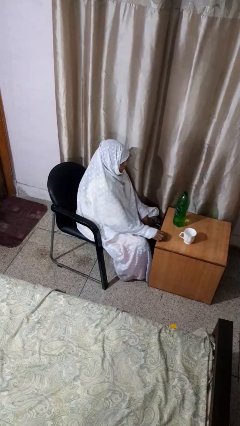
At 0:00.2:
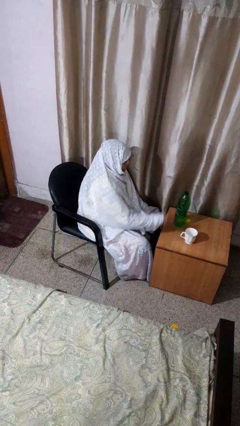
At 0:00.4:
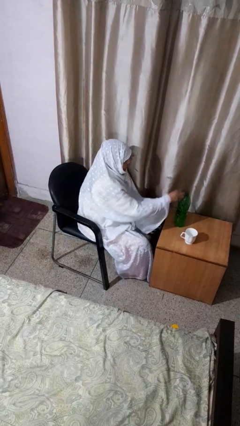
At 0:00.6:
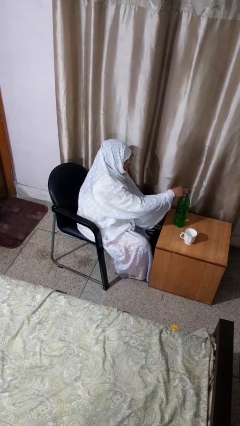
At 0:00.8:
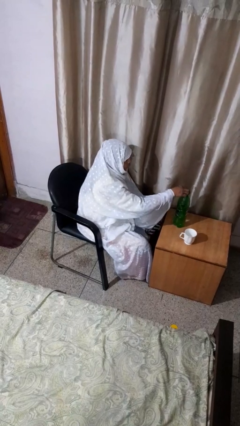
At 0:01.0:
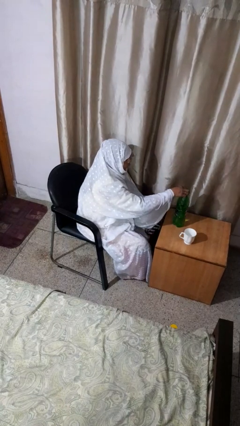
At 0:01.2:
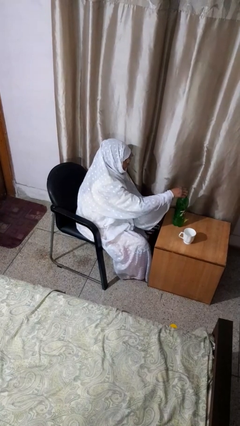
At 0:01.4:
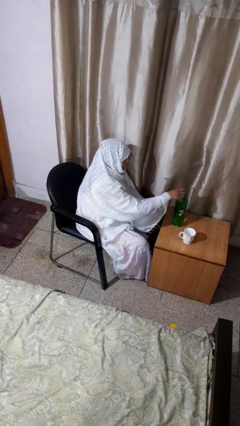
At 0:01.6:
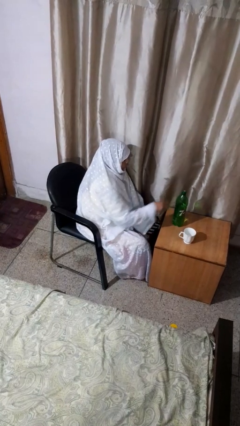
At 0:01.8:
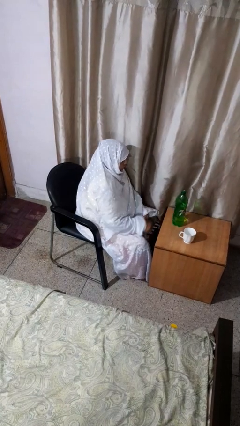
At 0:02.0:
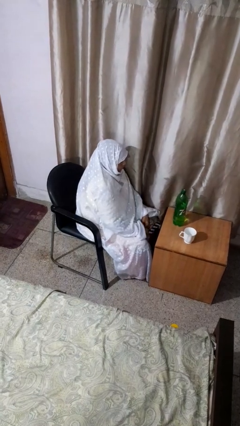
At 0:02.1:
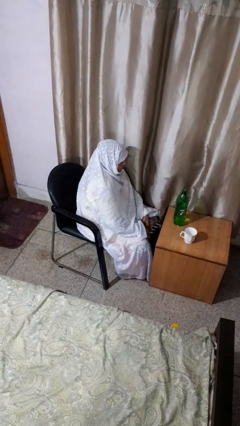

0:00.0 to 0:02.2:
person screws lid to bottle

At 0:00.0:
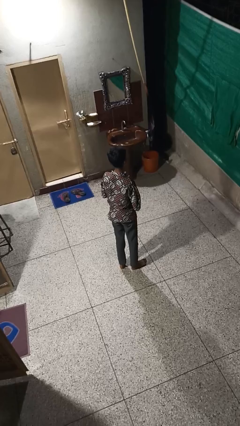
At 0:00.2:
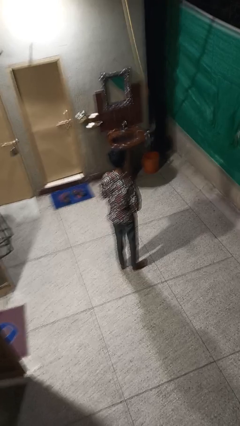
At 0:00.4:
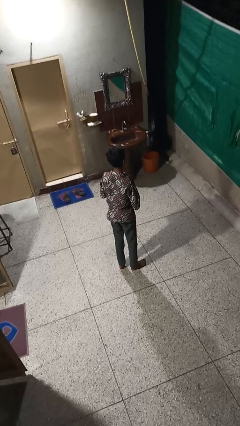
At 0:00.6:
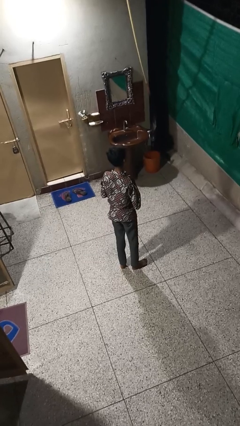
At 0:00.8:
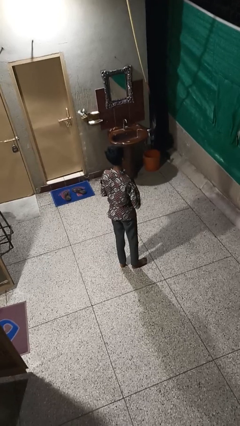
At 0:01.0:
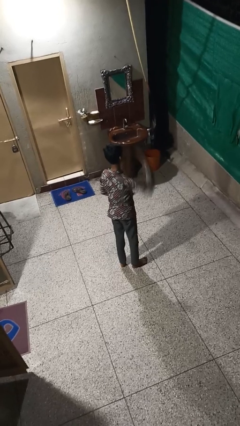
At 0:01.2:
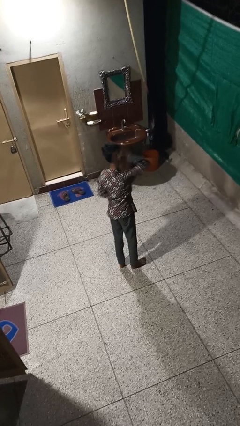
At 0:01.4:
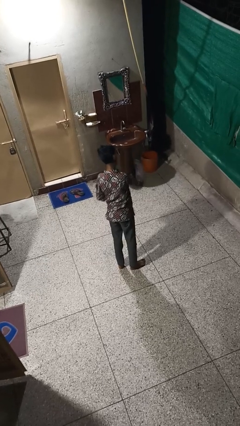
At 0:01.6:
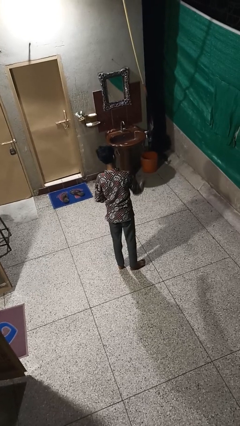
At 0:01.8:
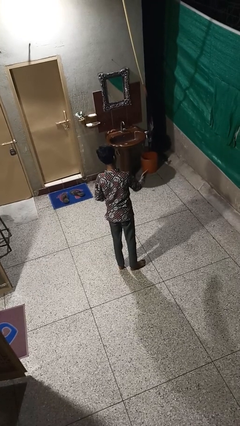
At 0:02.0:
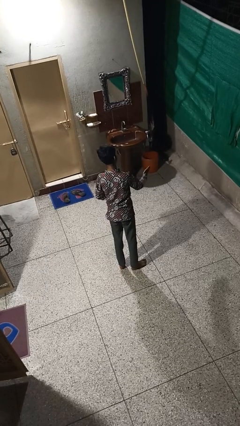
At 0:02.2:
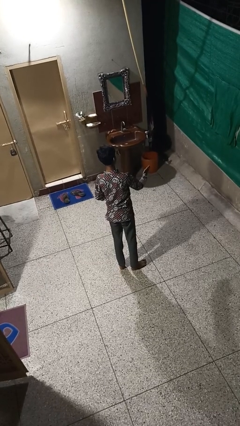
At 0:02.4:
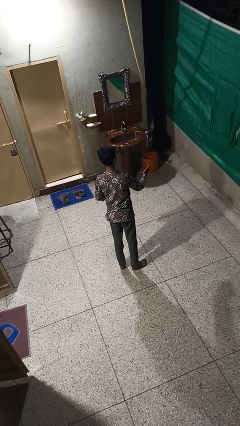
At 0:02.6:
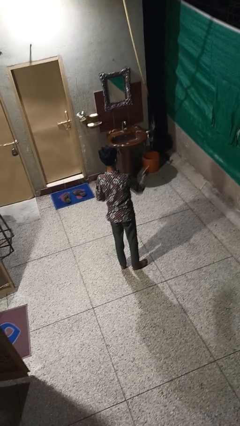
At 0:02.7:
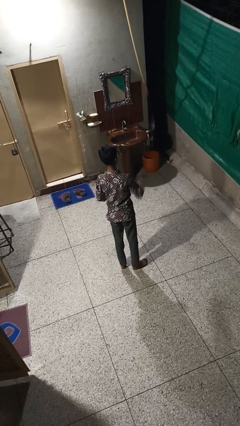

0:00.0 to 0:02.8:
person karate chop

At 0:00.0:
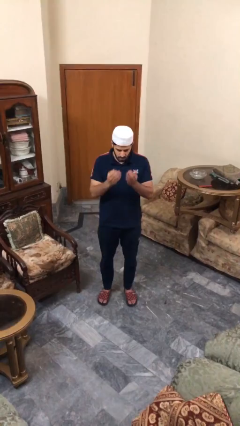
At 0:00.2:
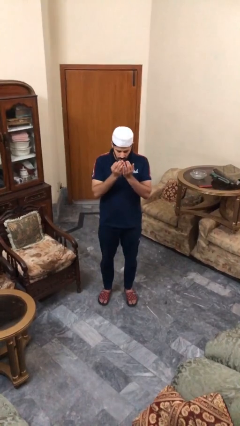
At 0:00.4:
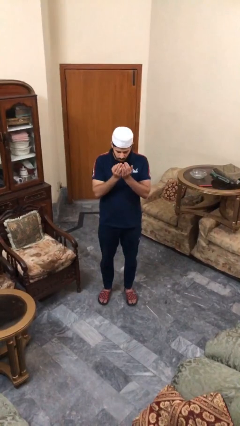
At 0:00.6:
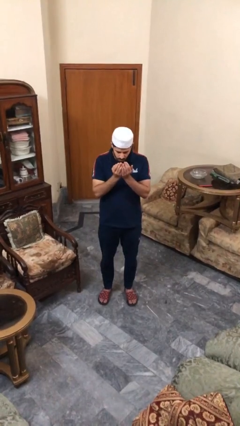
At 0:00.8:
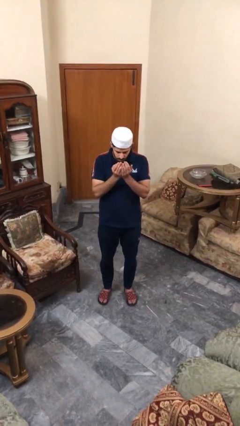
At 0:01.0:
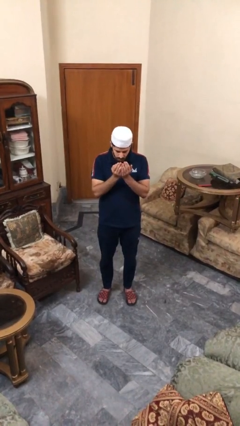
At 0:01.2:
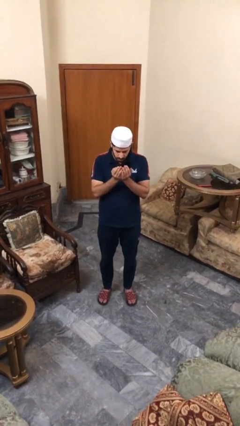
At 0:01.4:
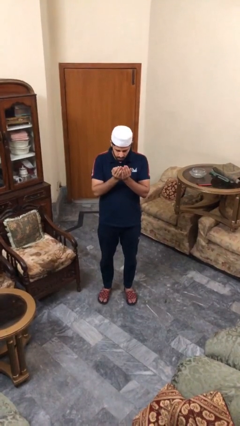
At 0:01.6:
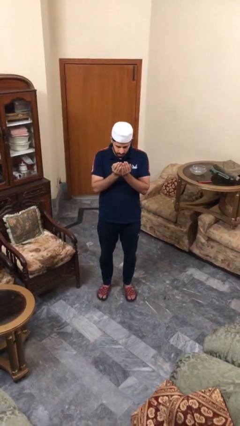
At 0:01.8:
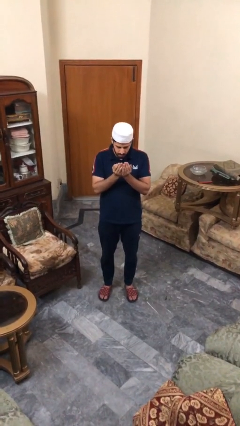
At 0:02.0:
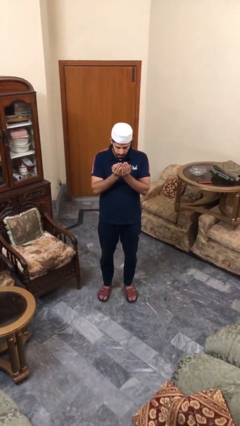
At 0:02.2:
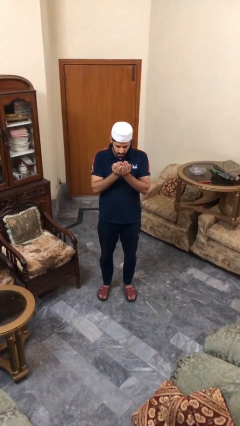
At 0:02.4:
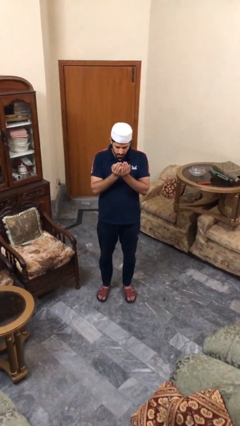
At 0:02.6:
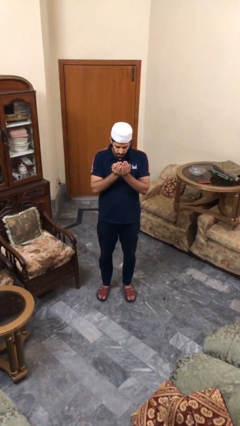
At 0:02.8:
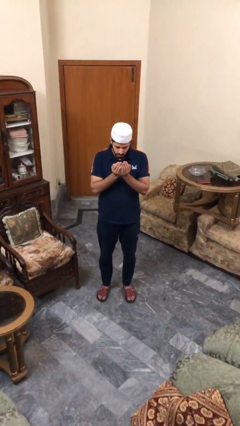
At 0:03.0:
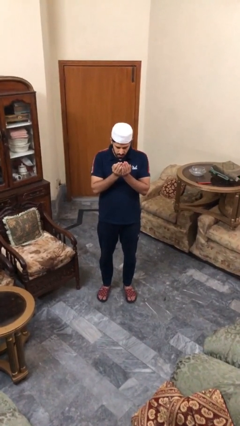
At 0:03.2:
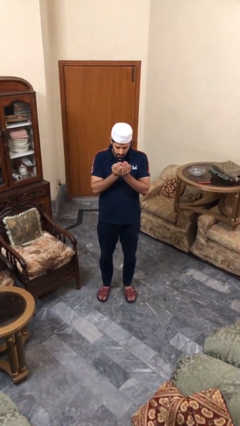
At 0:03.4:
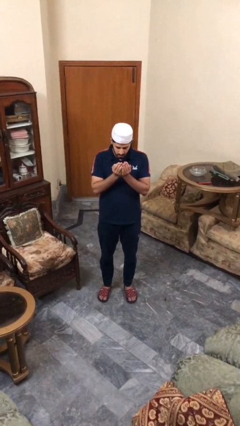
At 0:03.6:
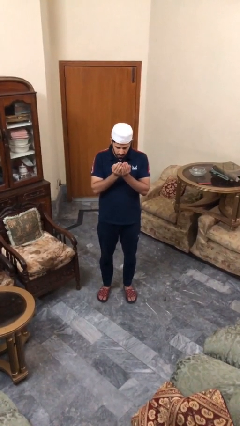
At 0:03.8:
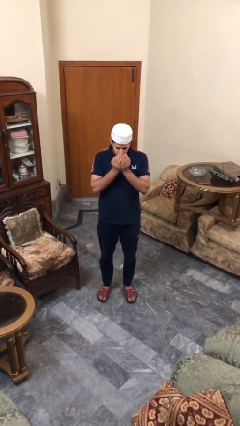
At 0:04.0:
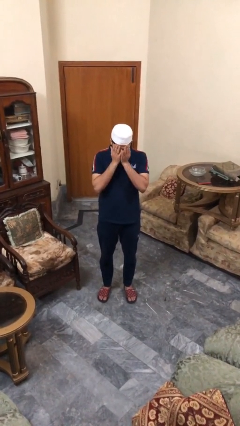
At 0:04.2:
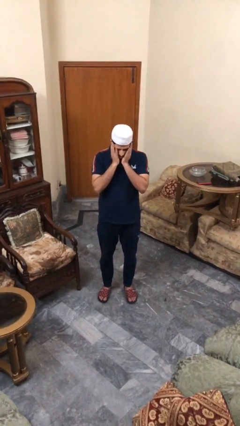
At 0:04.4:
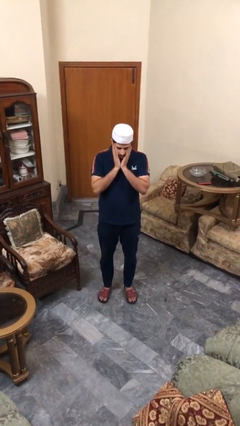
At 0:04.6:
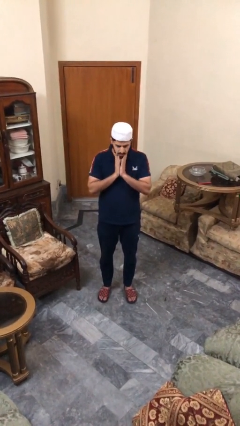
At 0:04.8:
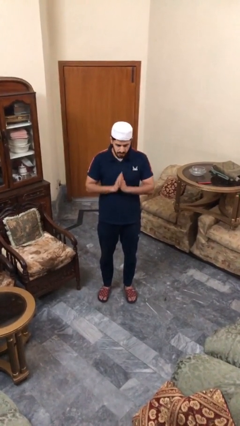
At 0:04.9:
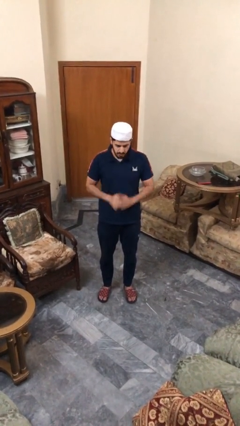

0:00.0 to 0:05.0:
person prays

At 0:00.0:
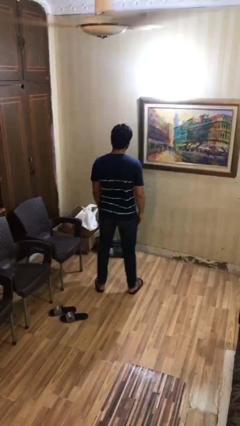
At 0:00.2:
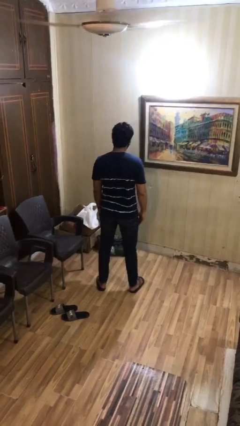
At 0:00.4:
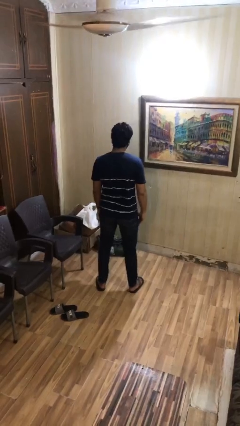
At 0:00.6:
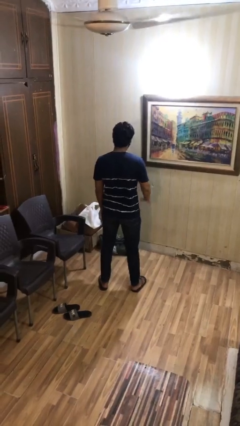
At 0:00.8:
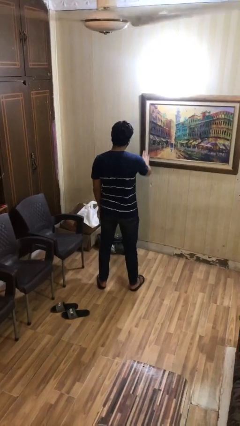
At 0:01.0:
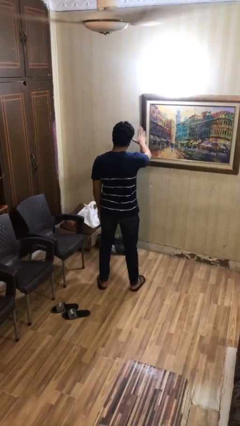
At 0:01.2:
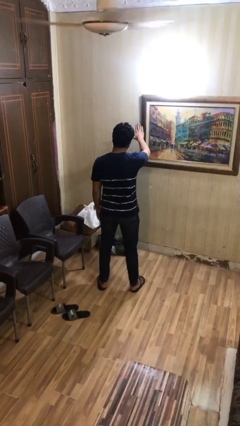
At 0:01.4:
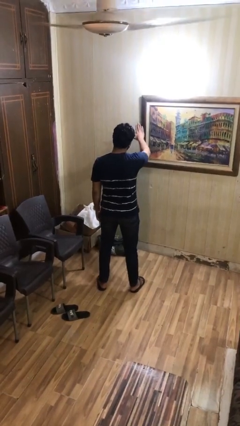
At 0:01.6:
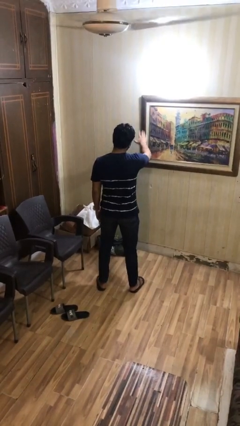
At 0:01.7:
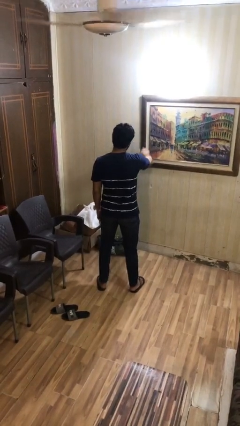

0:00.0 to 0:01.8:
person gestures stop

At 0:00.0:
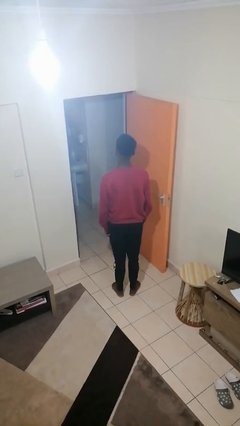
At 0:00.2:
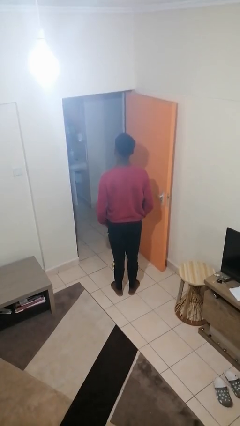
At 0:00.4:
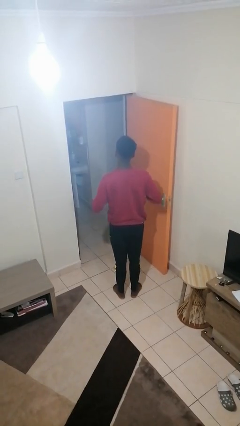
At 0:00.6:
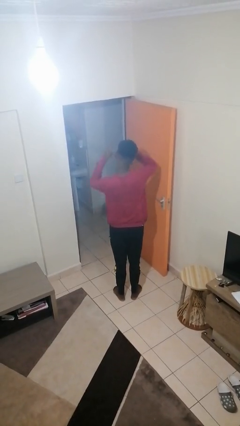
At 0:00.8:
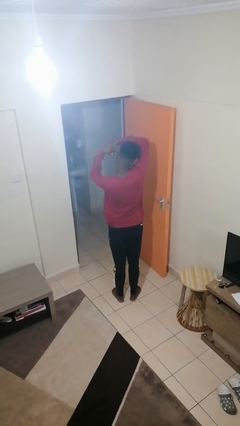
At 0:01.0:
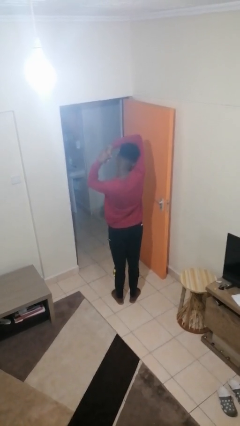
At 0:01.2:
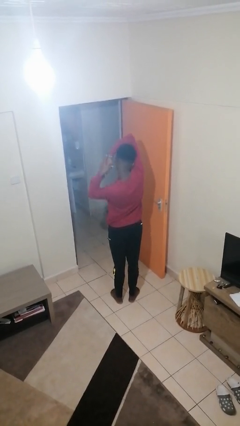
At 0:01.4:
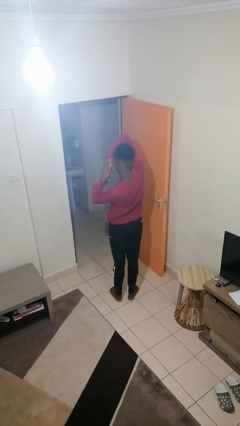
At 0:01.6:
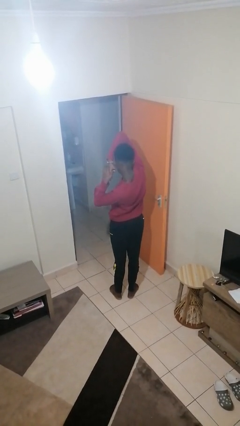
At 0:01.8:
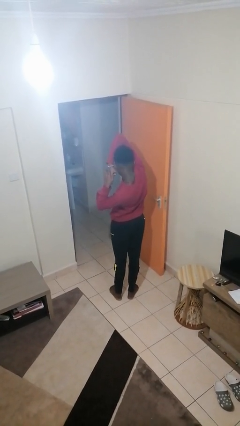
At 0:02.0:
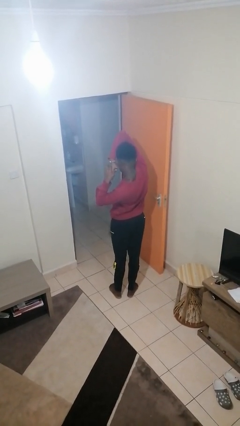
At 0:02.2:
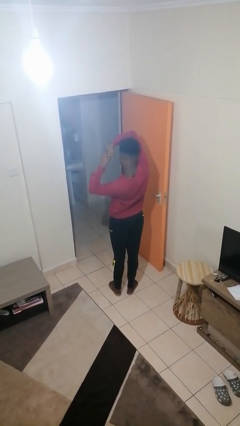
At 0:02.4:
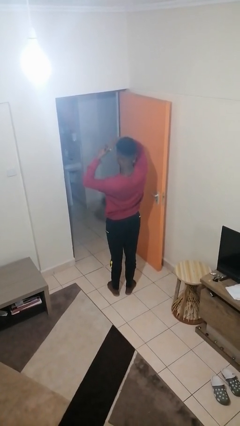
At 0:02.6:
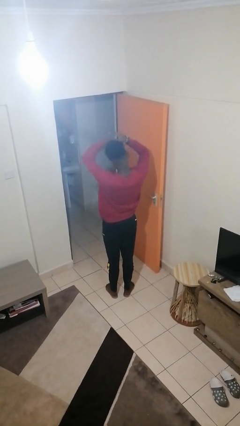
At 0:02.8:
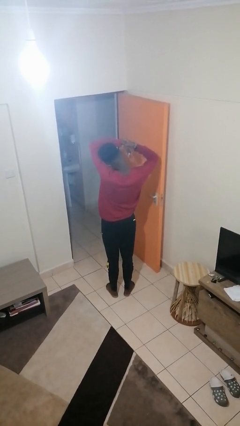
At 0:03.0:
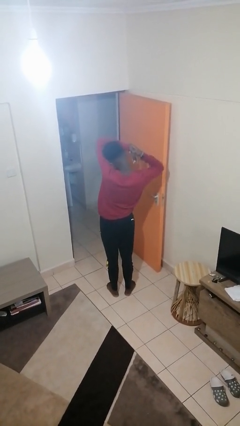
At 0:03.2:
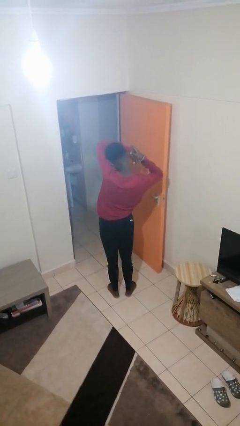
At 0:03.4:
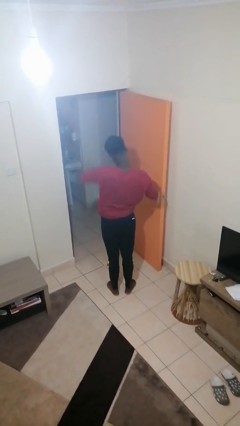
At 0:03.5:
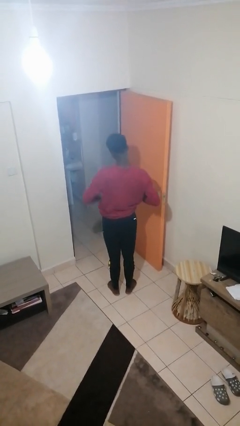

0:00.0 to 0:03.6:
person stretches arms over head

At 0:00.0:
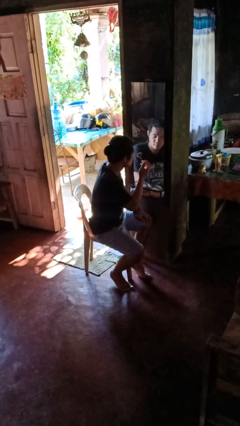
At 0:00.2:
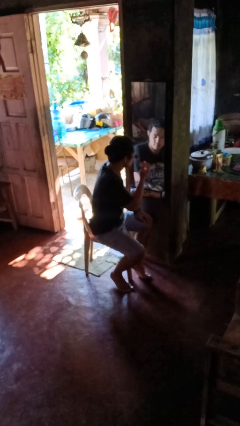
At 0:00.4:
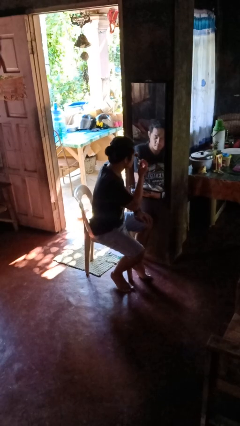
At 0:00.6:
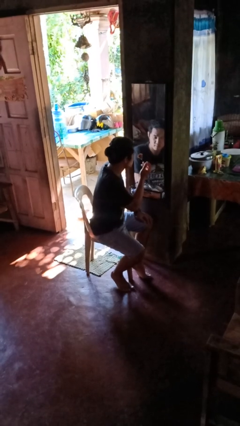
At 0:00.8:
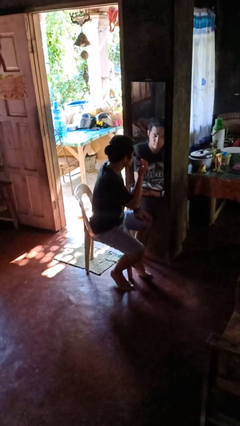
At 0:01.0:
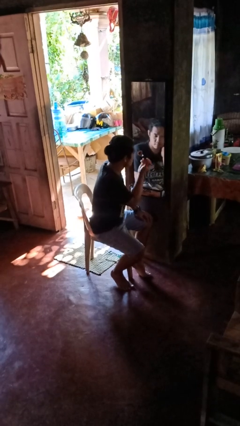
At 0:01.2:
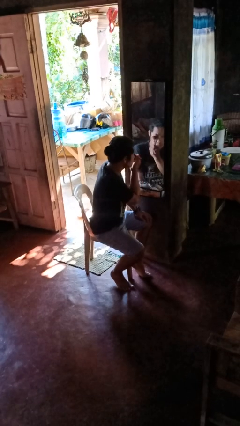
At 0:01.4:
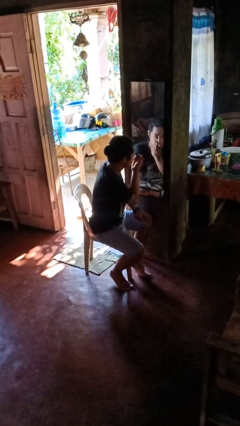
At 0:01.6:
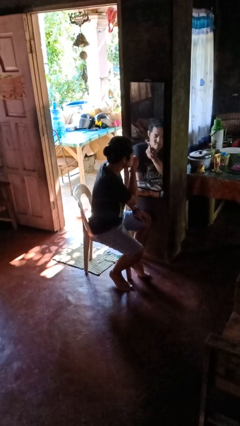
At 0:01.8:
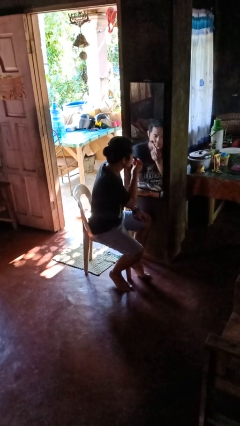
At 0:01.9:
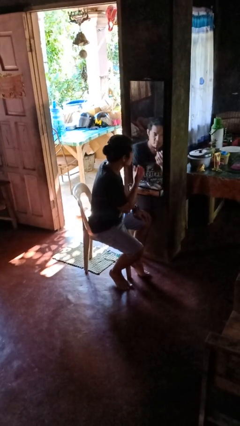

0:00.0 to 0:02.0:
person applies eye makeup
